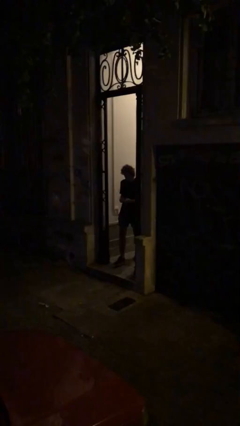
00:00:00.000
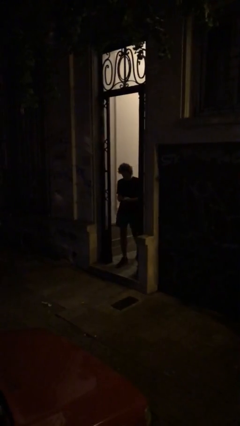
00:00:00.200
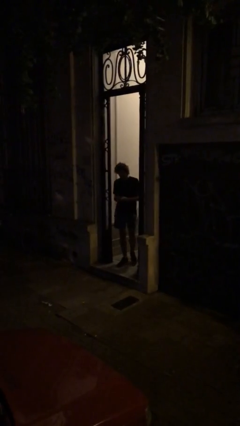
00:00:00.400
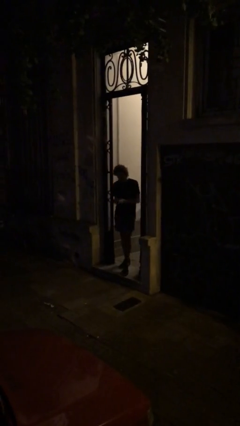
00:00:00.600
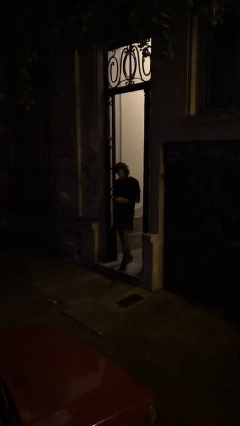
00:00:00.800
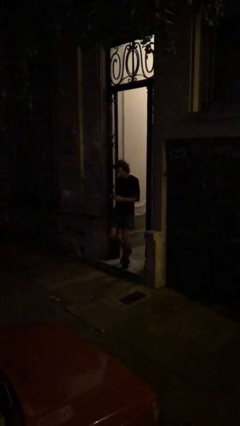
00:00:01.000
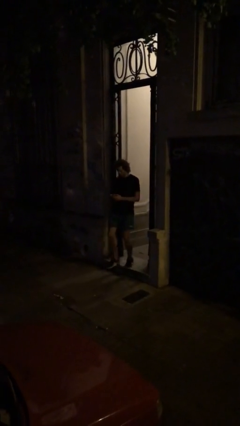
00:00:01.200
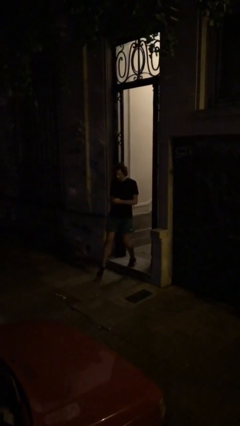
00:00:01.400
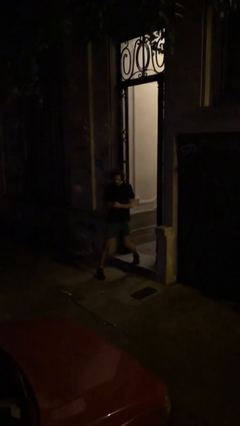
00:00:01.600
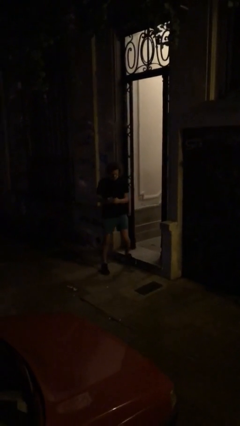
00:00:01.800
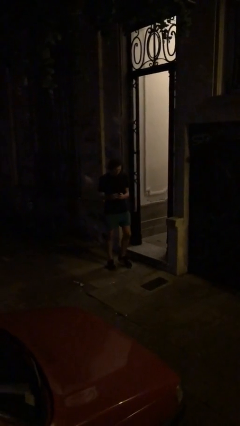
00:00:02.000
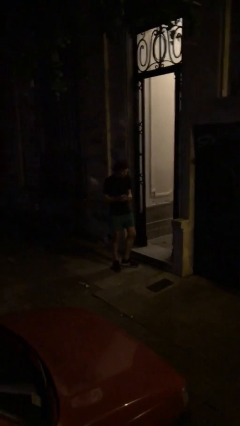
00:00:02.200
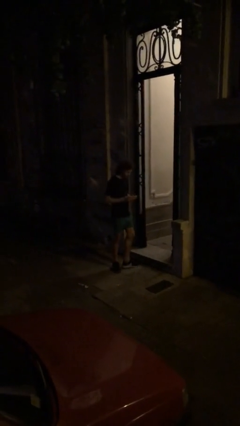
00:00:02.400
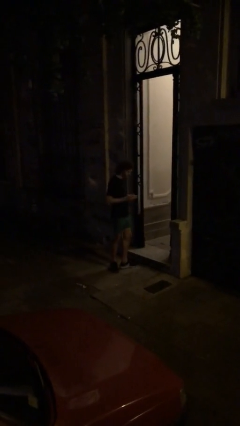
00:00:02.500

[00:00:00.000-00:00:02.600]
person enters scene through structure

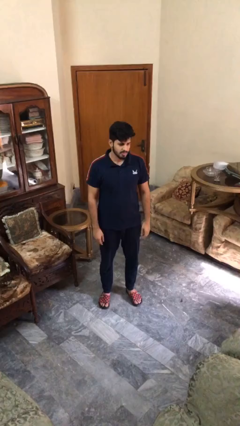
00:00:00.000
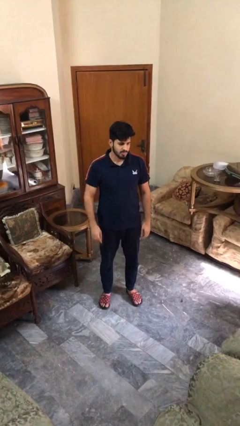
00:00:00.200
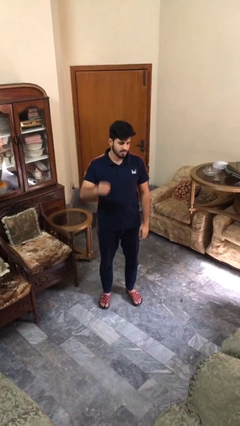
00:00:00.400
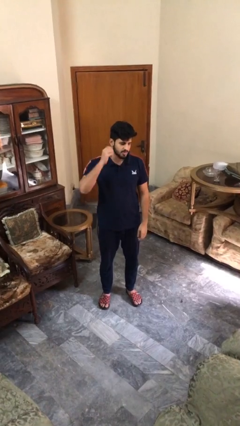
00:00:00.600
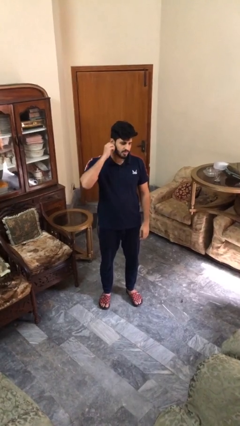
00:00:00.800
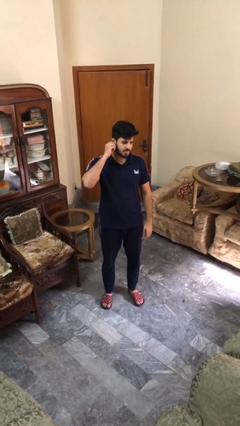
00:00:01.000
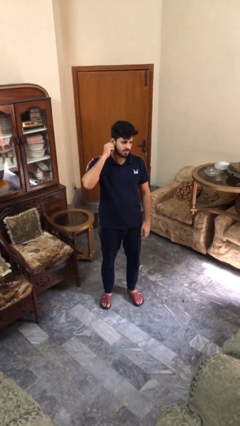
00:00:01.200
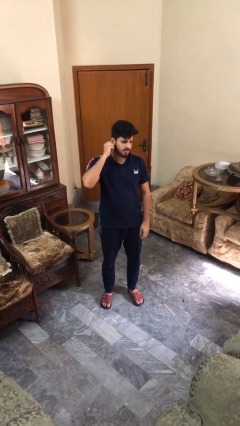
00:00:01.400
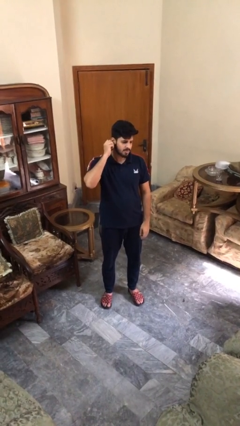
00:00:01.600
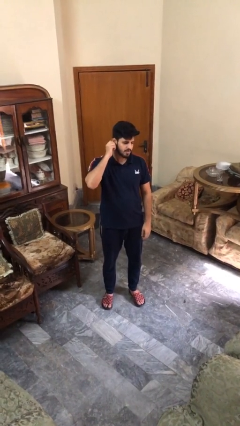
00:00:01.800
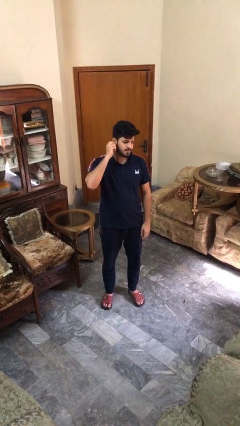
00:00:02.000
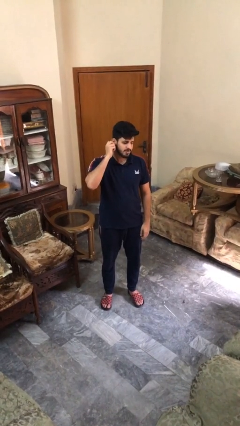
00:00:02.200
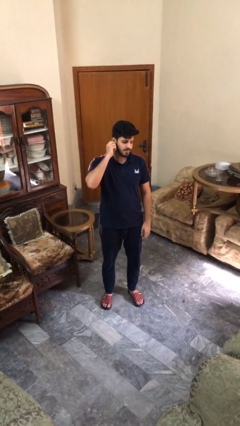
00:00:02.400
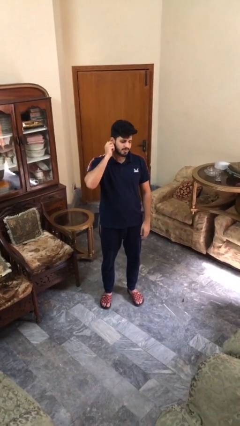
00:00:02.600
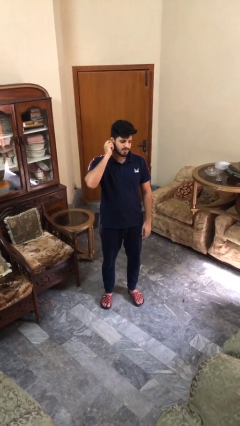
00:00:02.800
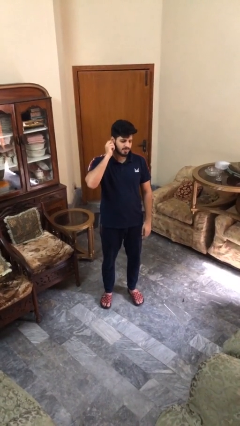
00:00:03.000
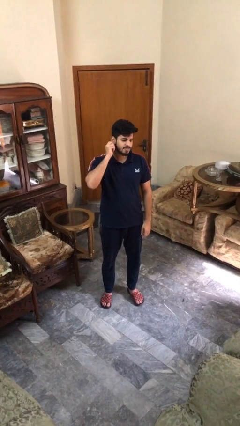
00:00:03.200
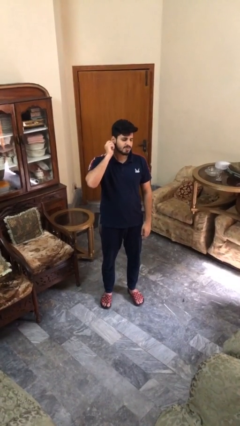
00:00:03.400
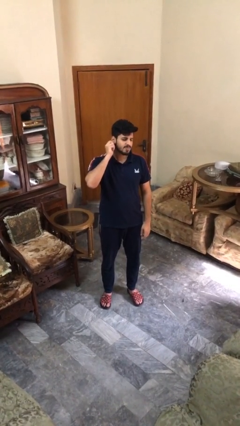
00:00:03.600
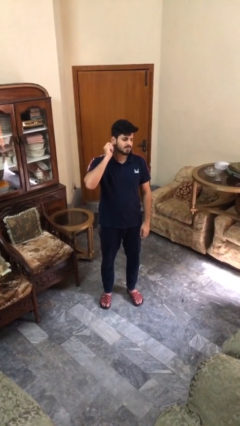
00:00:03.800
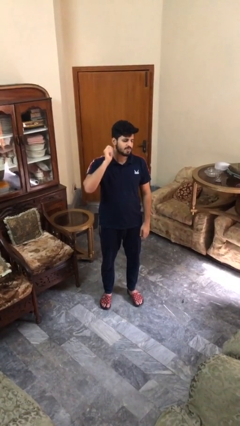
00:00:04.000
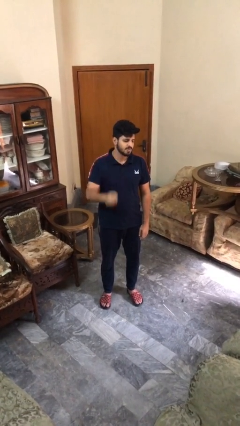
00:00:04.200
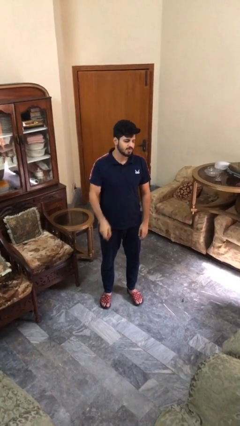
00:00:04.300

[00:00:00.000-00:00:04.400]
person touches earlobe

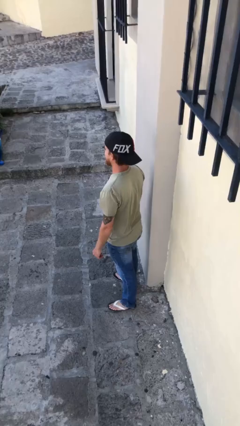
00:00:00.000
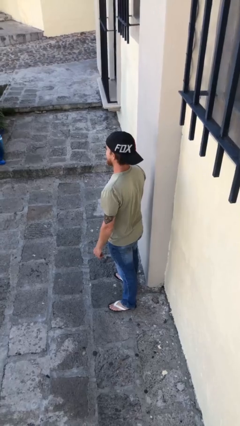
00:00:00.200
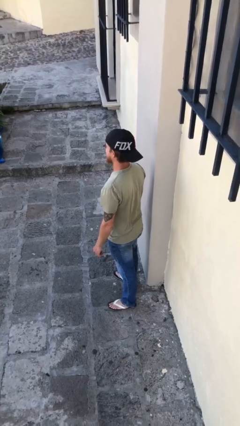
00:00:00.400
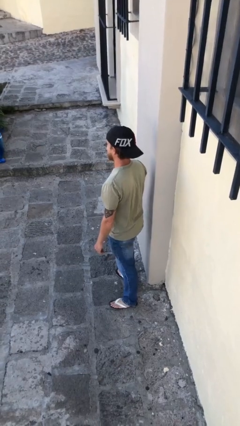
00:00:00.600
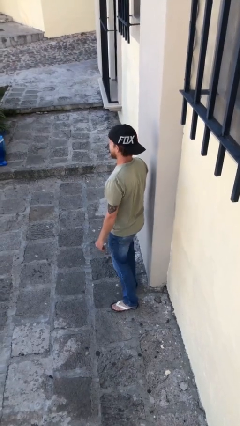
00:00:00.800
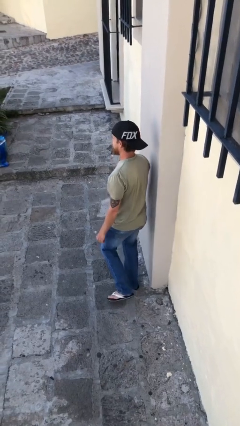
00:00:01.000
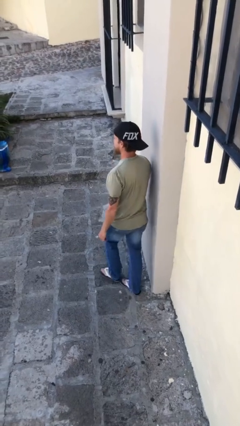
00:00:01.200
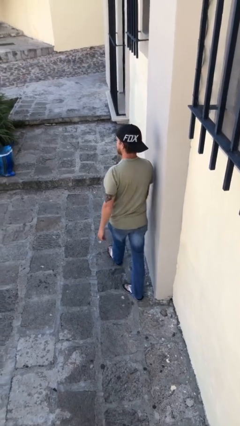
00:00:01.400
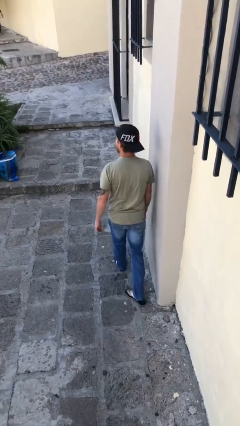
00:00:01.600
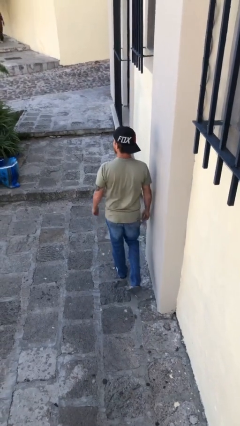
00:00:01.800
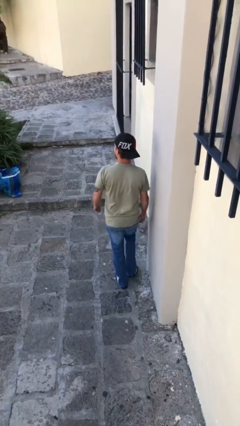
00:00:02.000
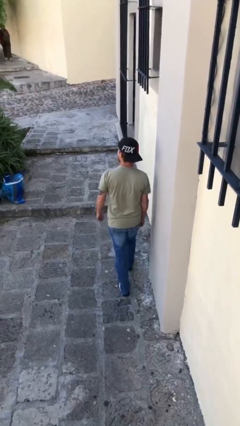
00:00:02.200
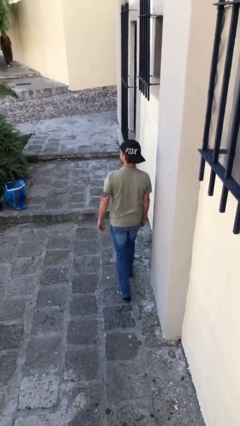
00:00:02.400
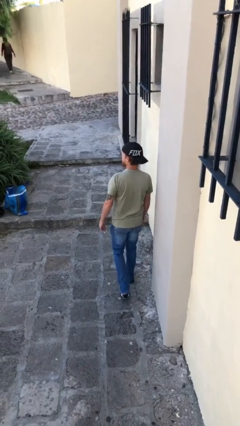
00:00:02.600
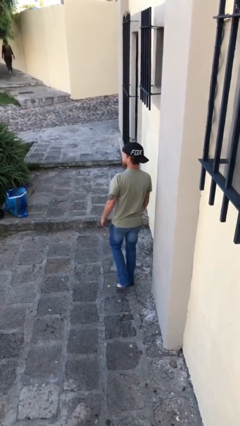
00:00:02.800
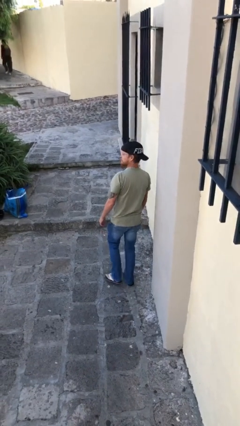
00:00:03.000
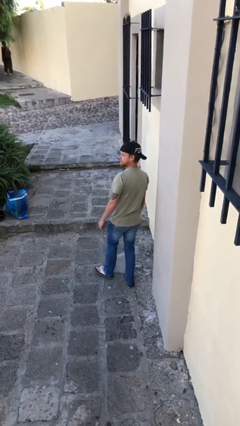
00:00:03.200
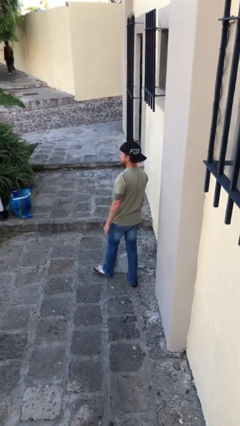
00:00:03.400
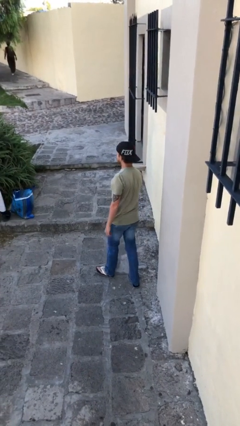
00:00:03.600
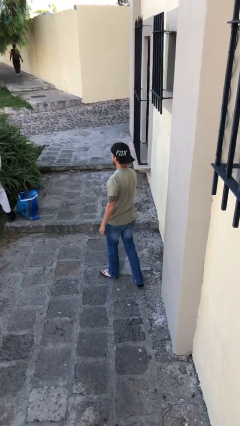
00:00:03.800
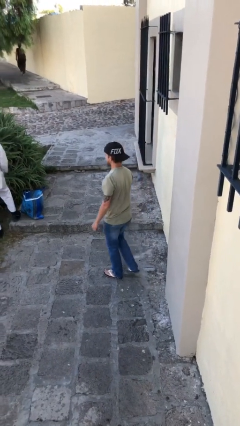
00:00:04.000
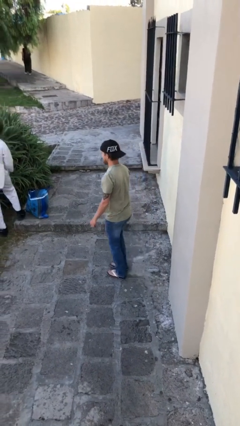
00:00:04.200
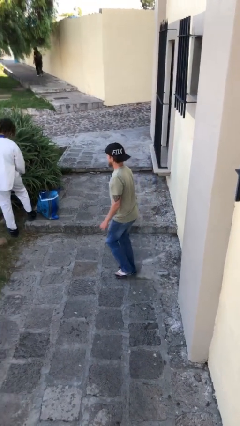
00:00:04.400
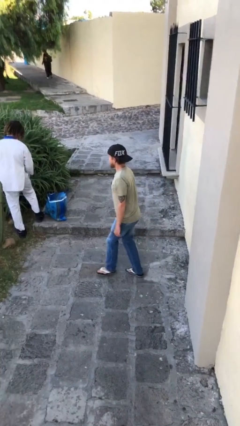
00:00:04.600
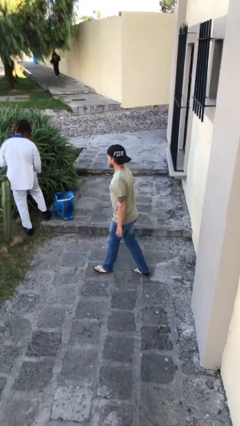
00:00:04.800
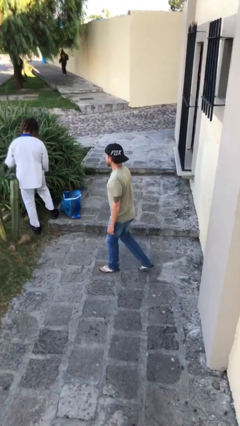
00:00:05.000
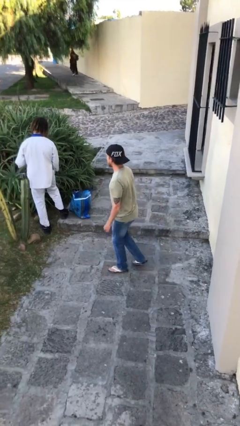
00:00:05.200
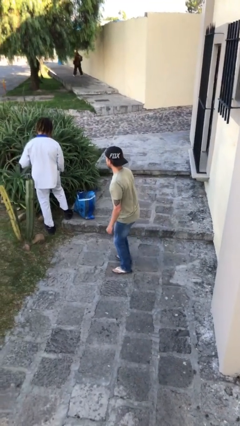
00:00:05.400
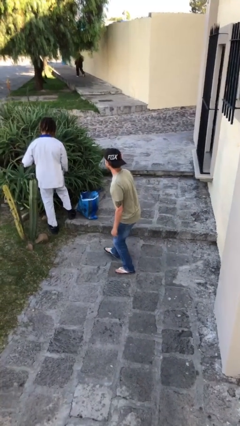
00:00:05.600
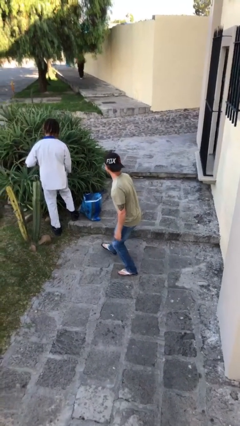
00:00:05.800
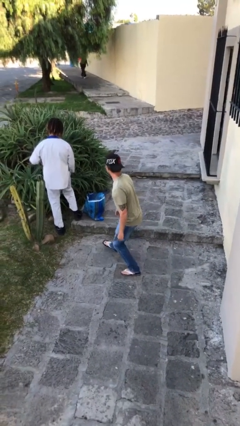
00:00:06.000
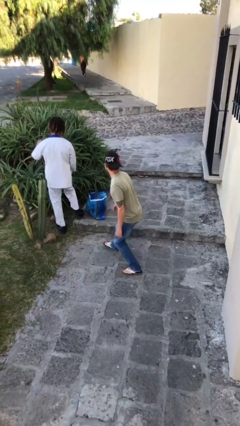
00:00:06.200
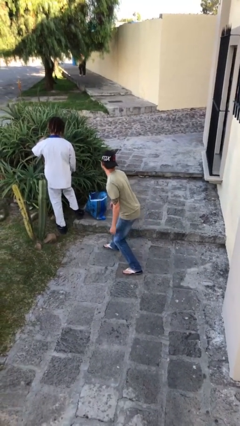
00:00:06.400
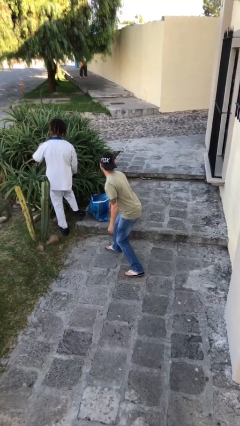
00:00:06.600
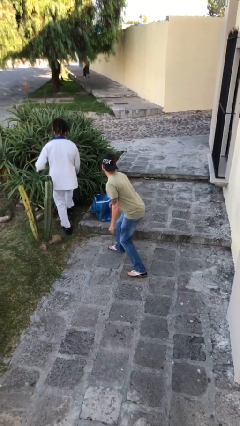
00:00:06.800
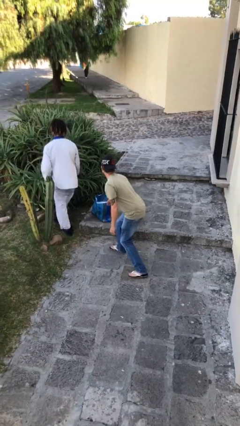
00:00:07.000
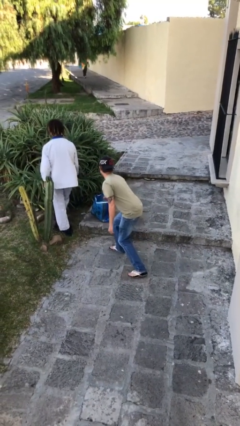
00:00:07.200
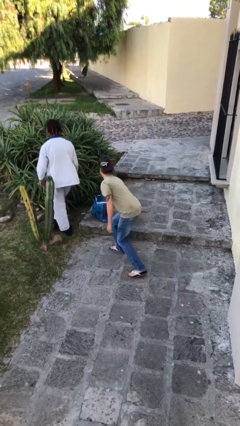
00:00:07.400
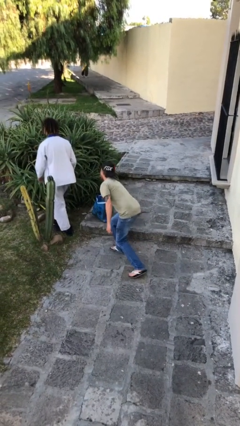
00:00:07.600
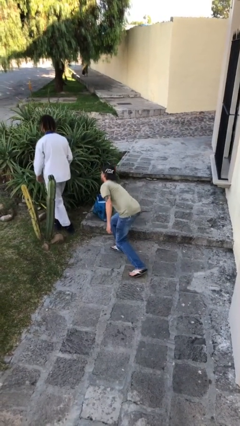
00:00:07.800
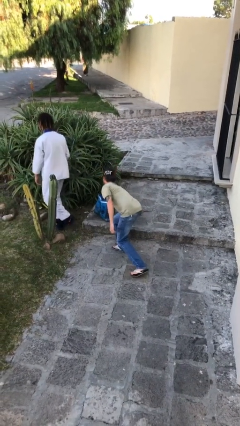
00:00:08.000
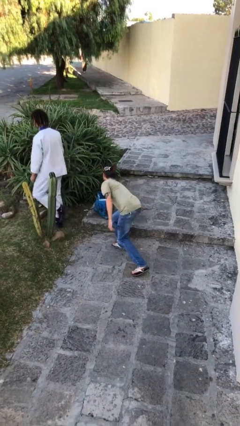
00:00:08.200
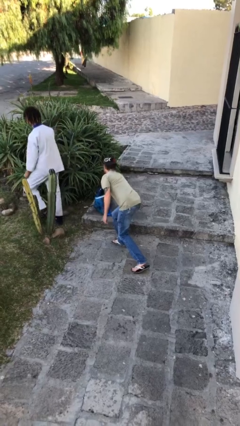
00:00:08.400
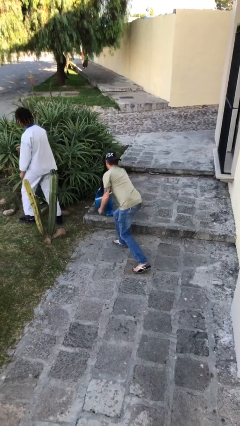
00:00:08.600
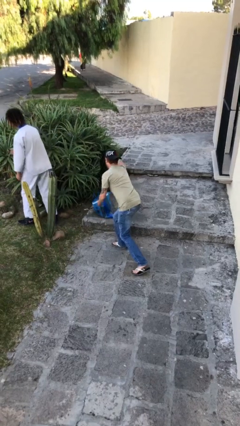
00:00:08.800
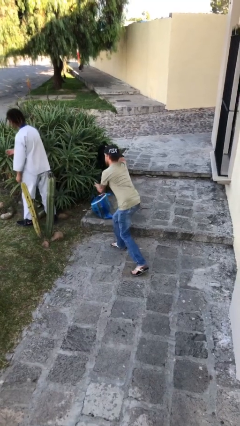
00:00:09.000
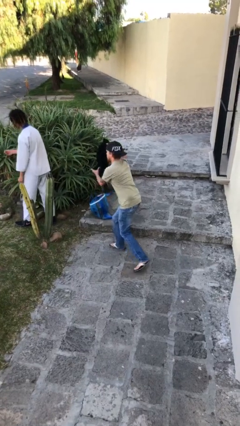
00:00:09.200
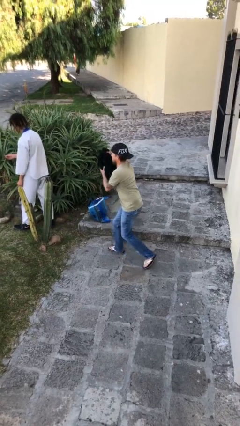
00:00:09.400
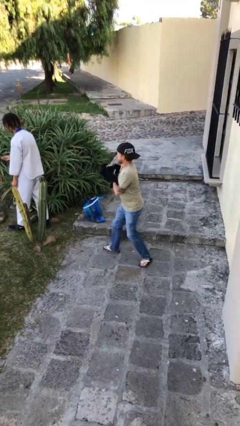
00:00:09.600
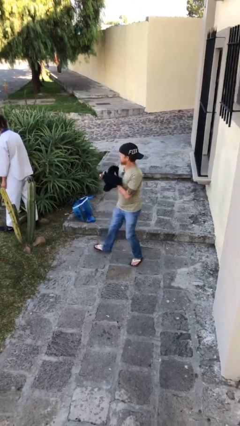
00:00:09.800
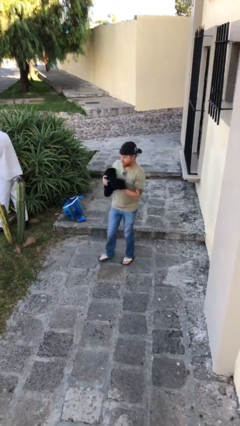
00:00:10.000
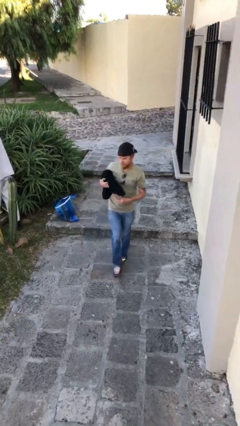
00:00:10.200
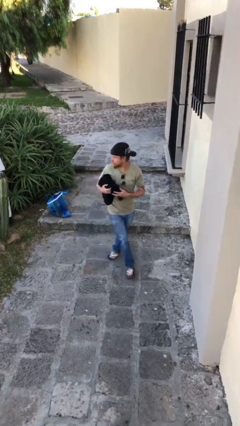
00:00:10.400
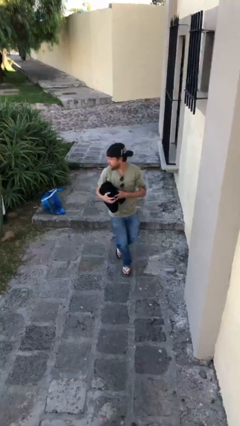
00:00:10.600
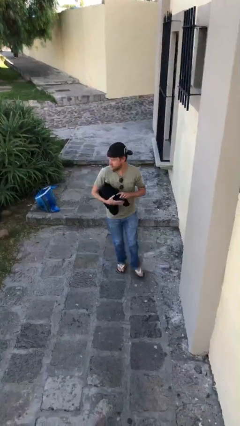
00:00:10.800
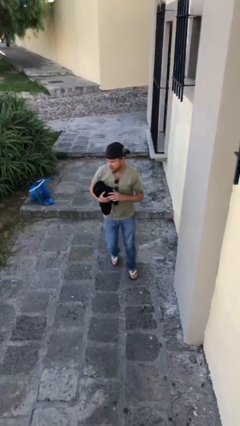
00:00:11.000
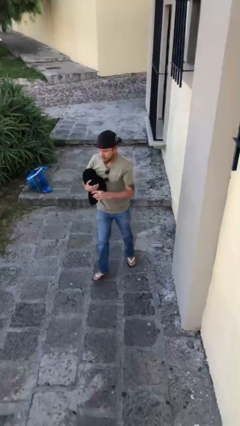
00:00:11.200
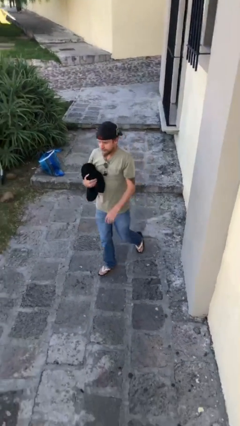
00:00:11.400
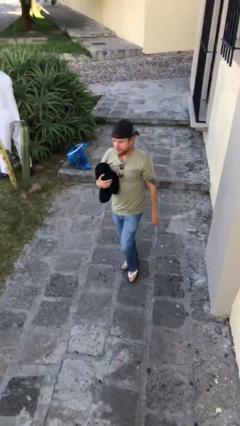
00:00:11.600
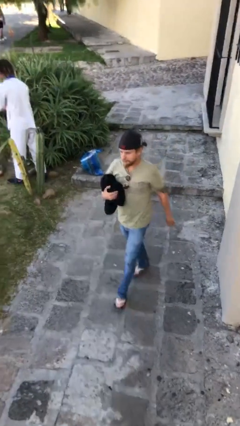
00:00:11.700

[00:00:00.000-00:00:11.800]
person steals object from person
